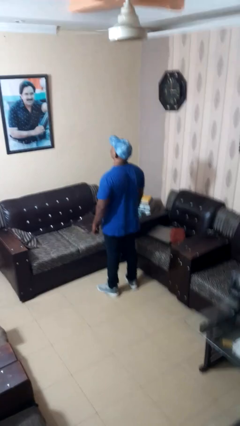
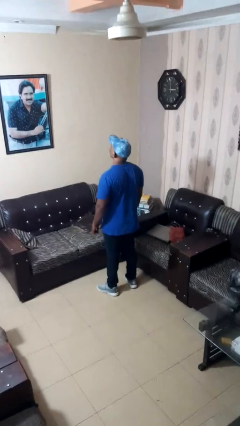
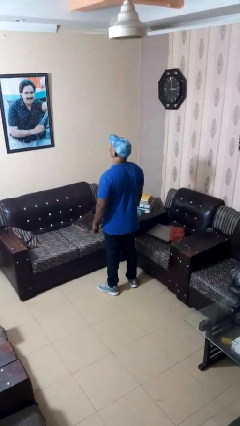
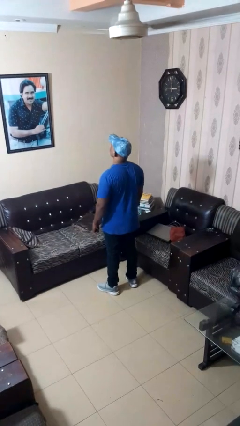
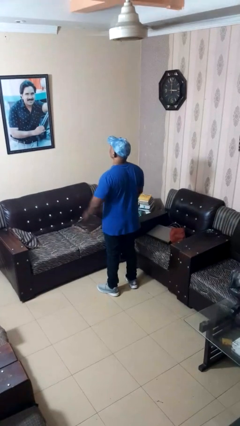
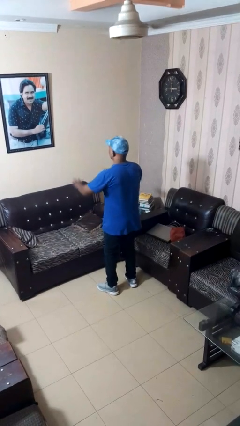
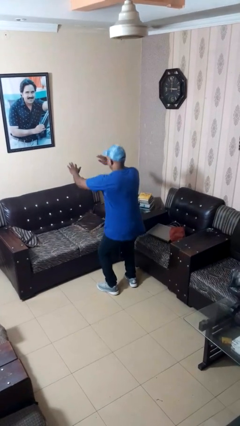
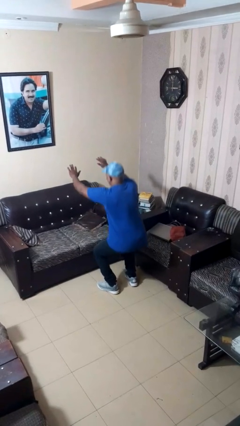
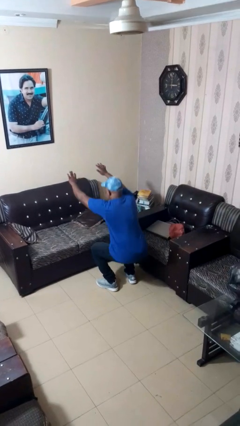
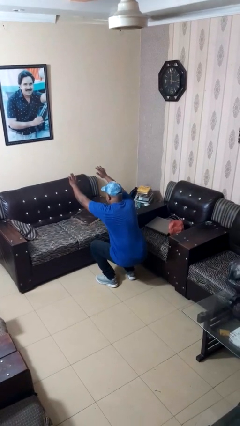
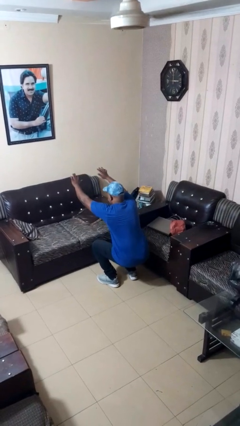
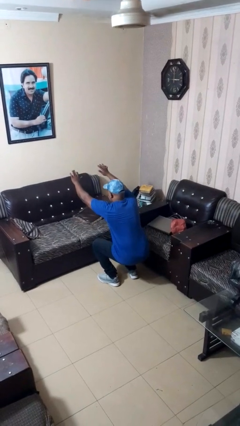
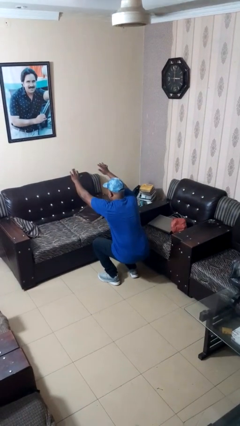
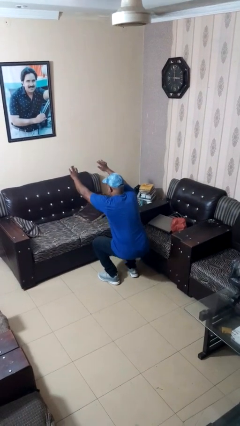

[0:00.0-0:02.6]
person squats

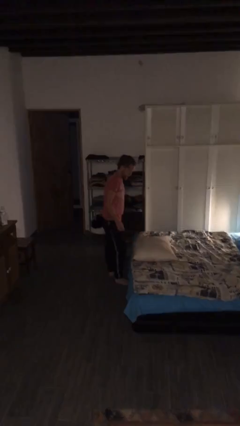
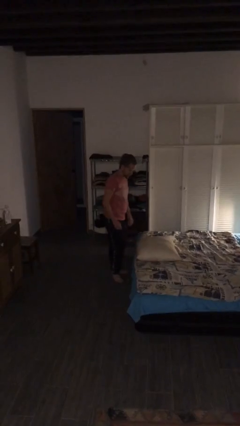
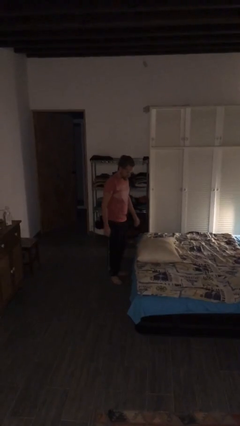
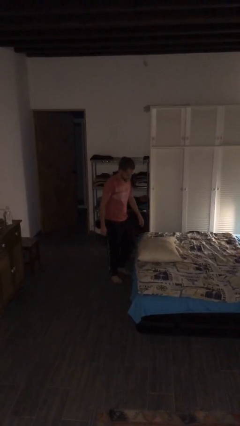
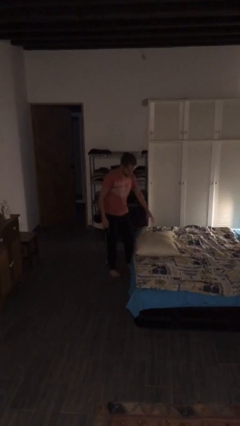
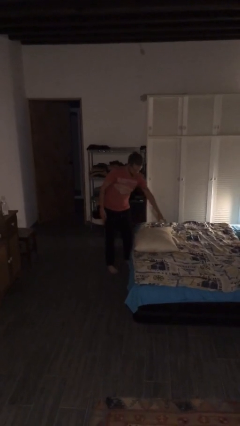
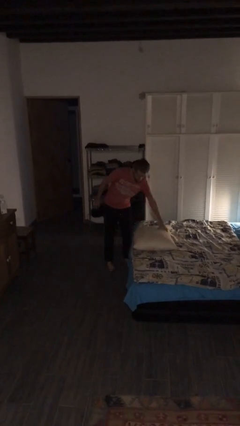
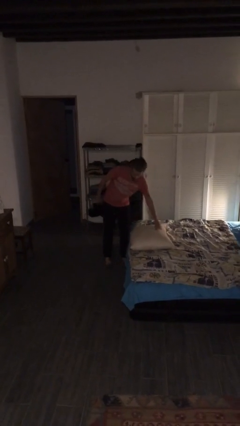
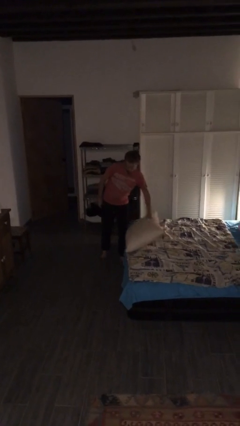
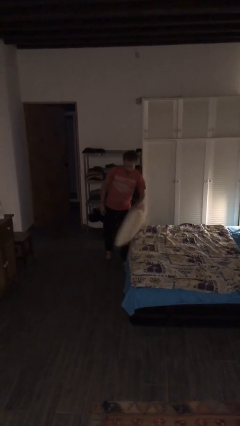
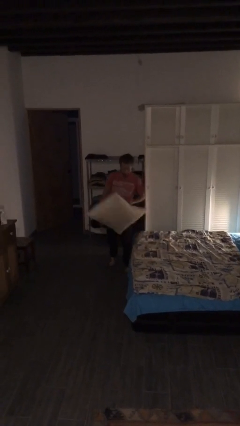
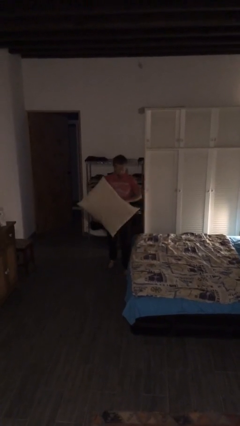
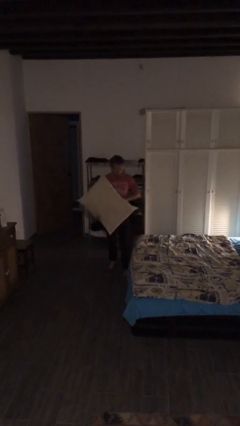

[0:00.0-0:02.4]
person picks up object from bed

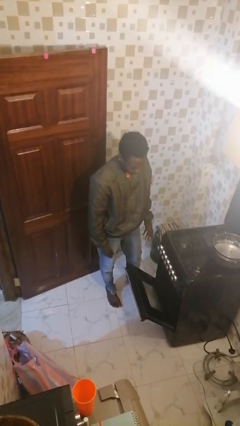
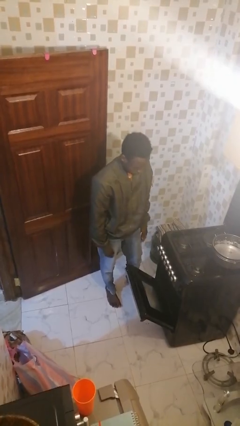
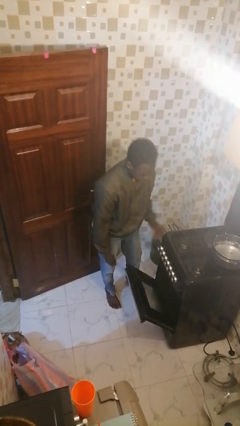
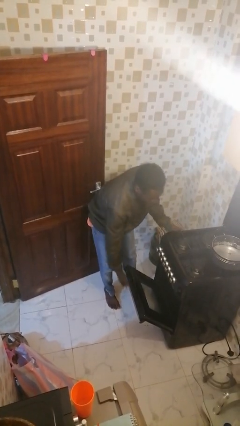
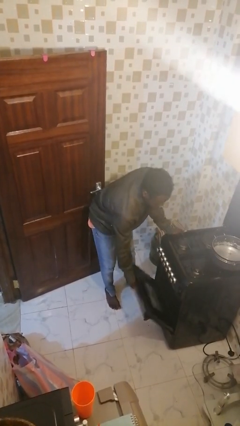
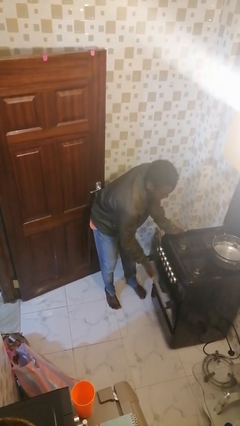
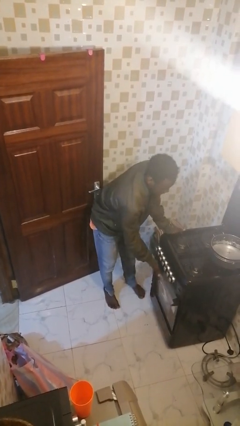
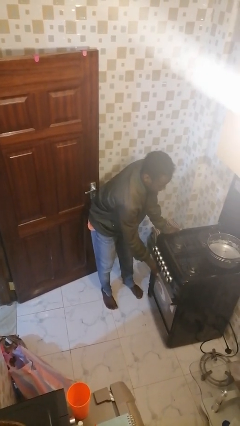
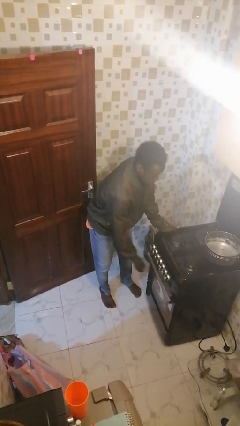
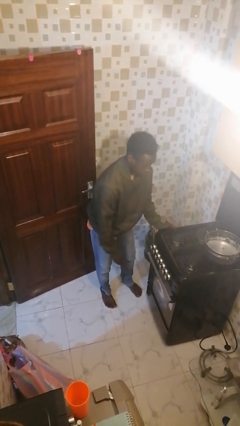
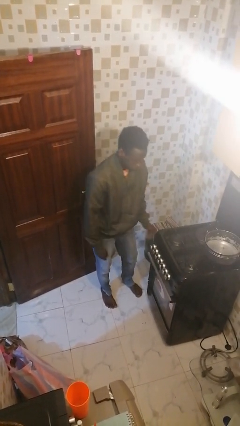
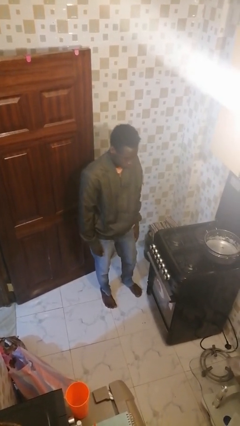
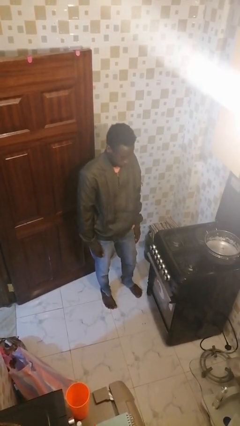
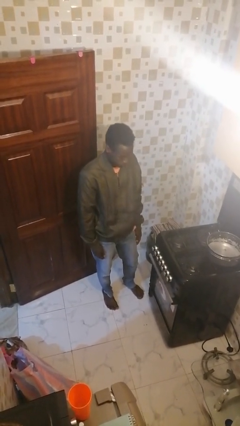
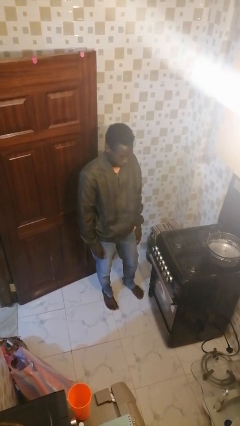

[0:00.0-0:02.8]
person closes oven door

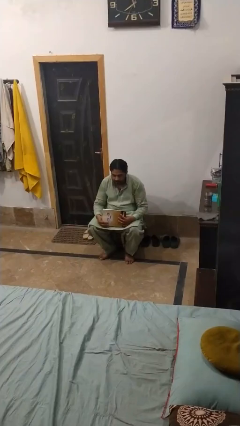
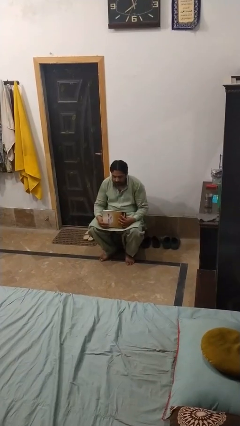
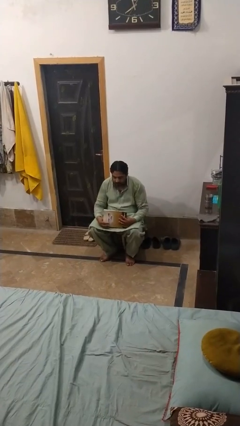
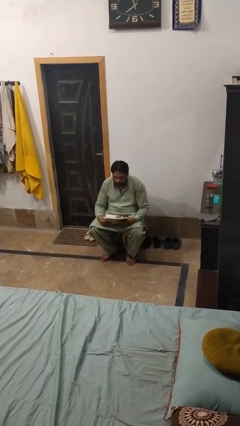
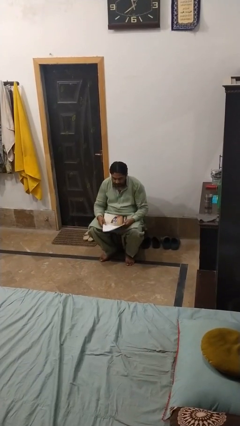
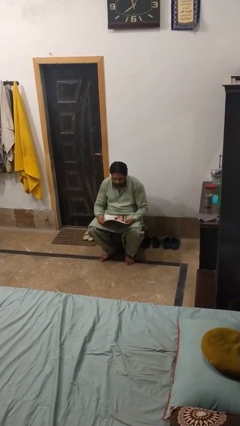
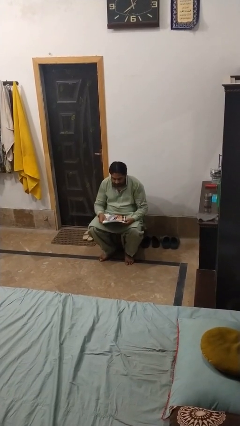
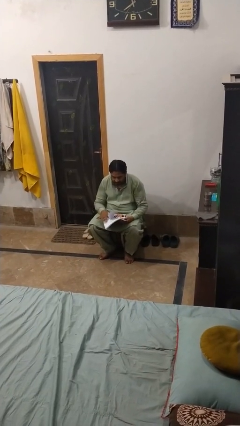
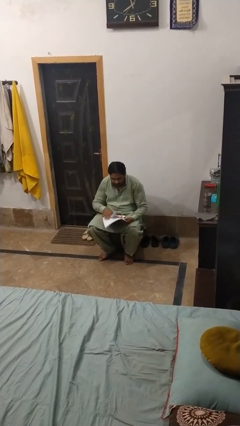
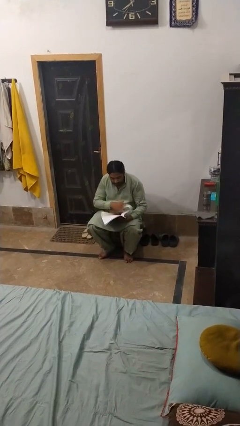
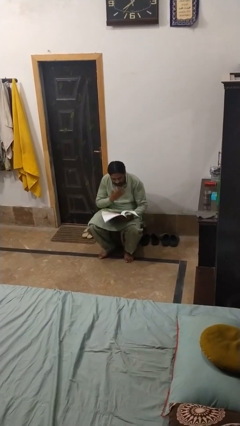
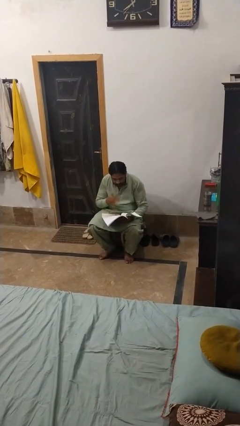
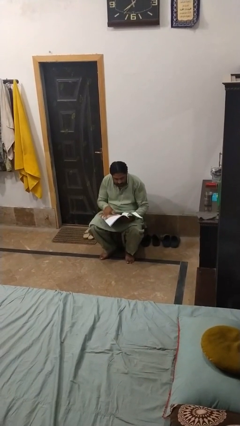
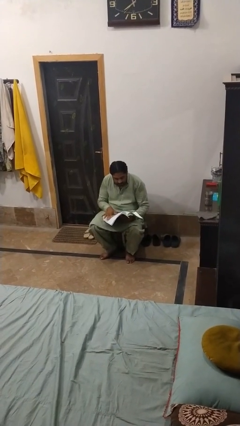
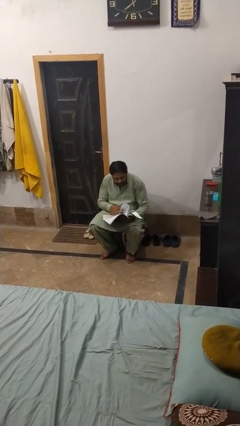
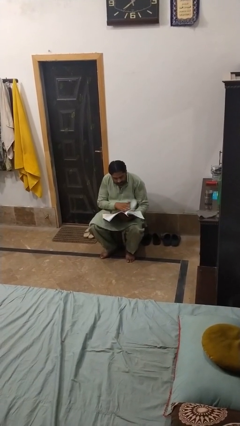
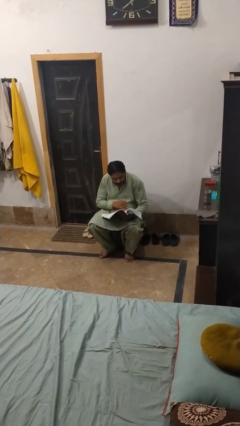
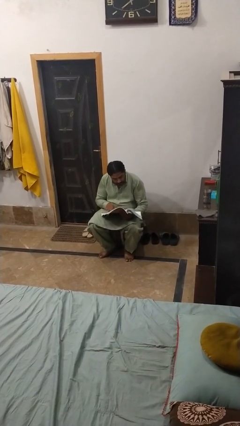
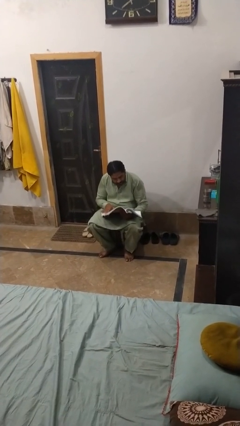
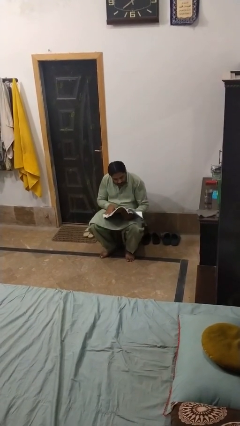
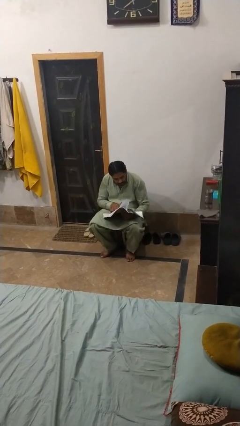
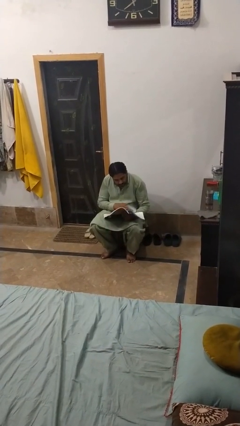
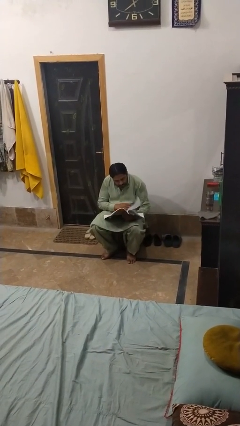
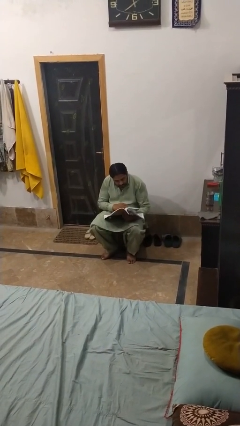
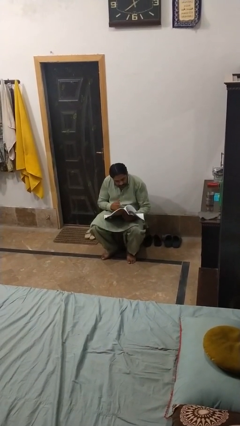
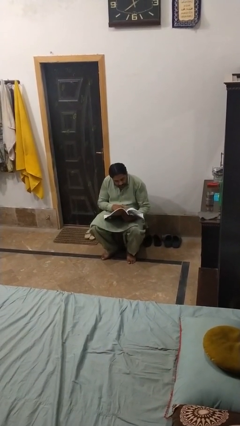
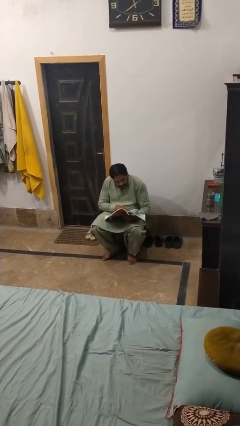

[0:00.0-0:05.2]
person reads book

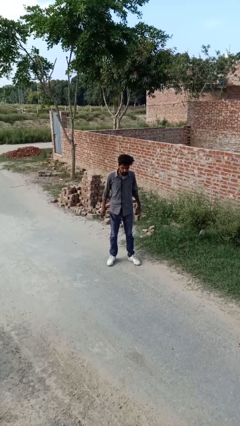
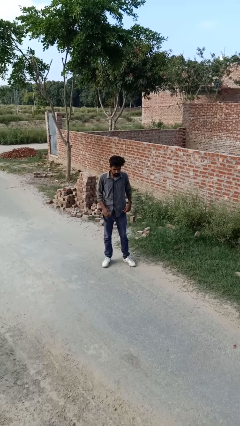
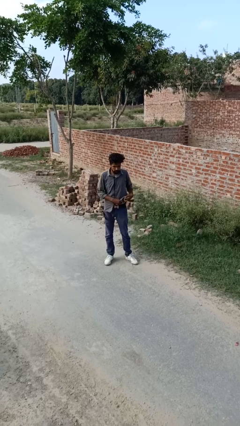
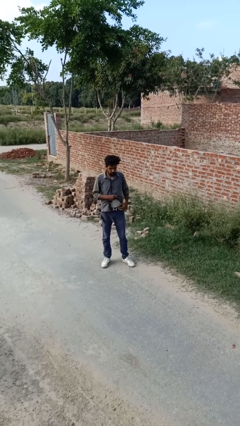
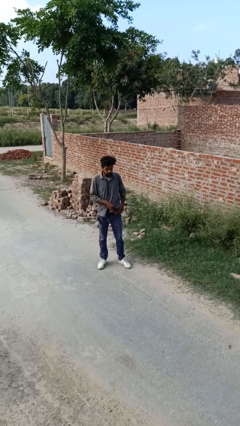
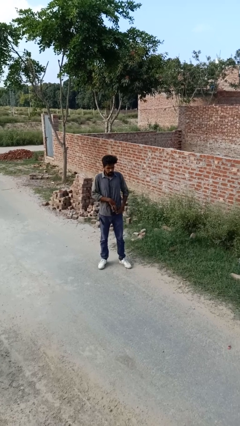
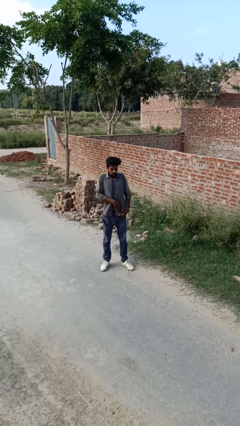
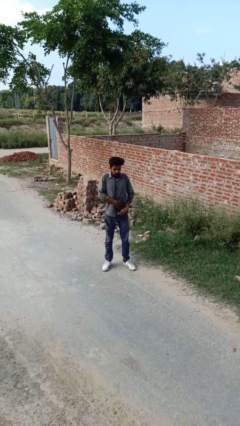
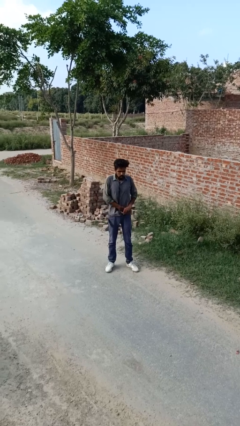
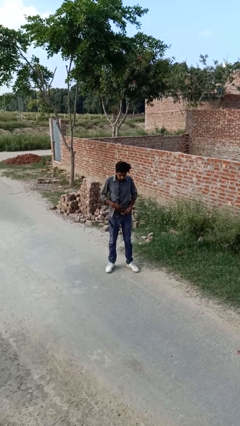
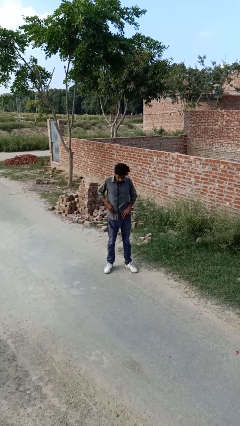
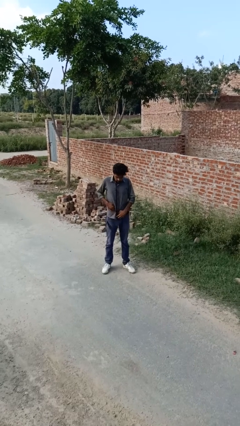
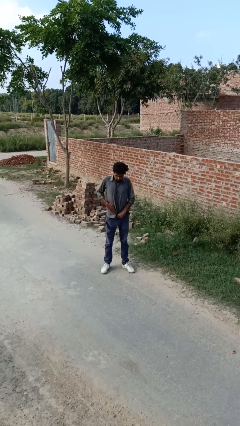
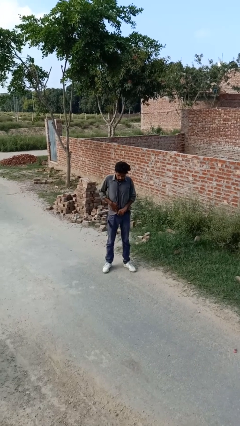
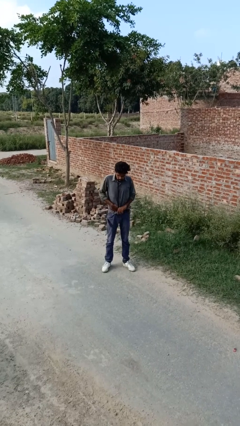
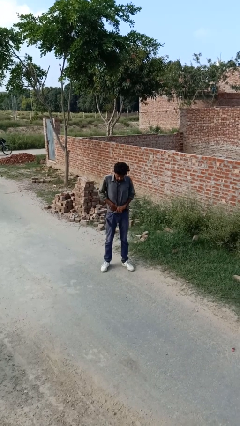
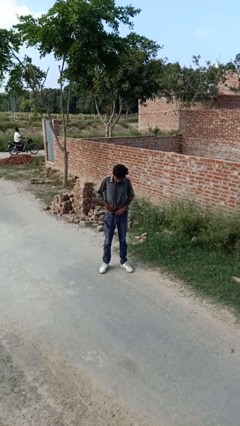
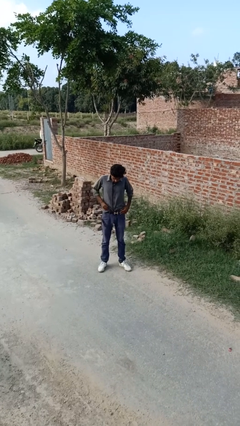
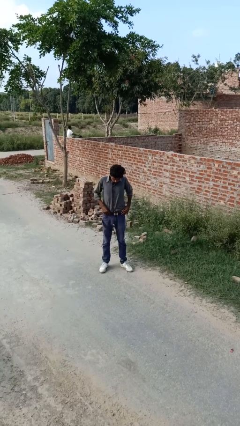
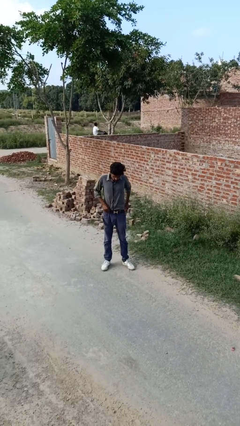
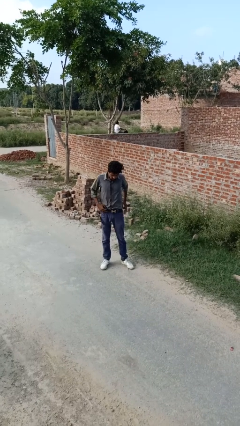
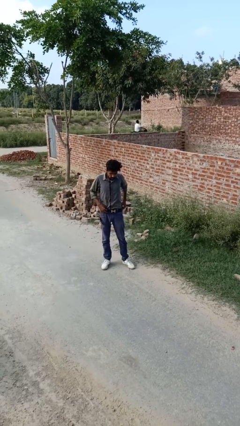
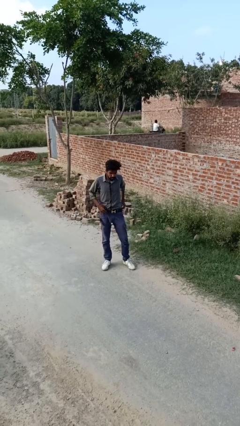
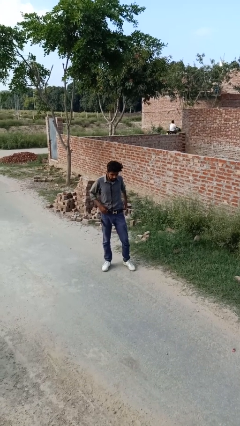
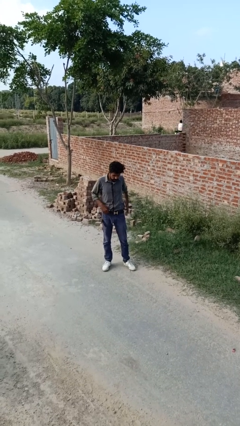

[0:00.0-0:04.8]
person tucks in shirt
